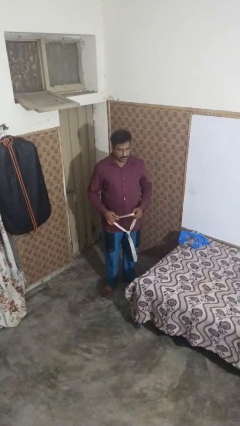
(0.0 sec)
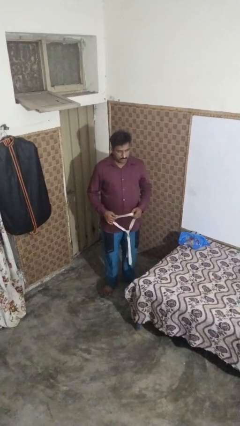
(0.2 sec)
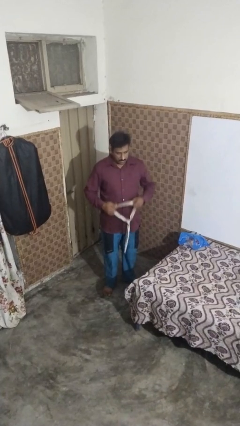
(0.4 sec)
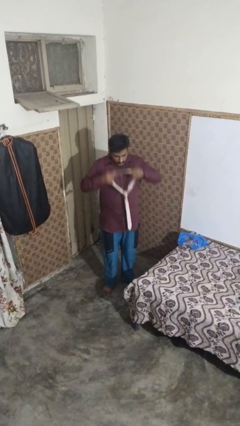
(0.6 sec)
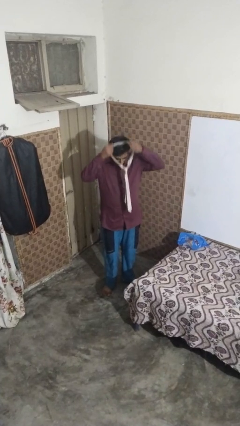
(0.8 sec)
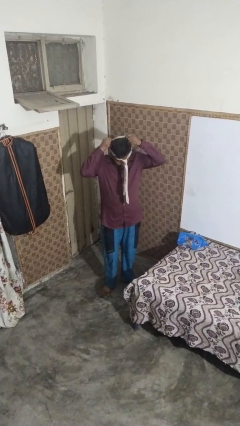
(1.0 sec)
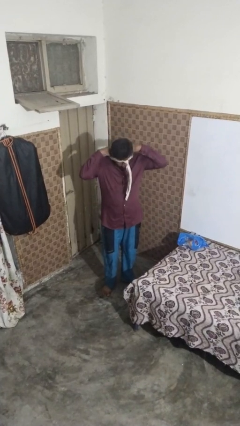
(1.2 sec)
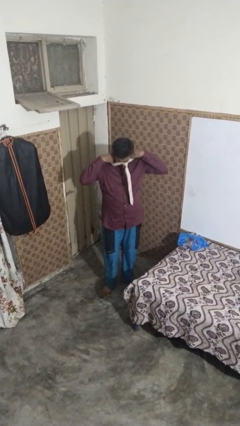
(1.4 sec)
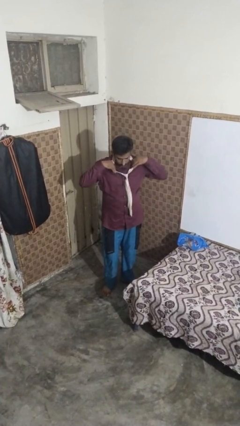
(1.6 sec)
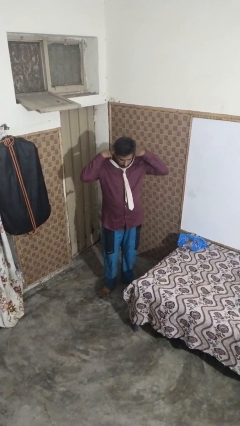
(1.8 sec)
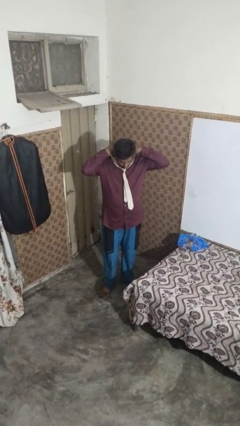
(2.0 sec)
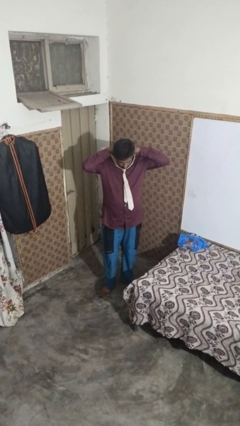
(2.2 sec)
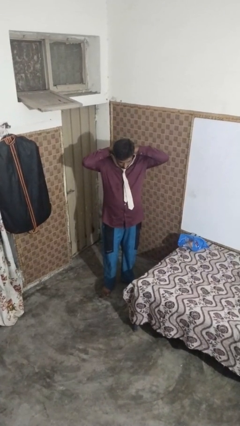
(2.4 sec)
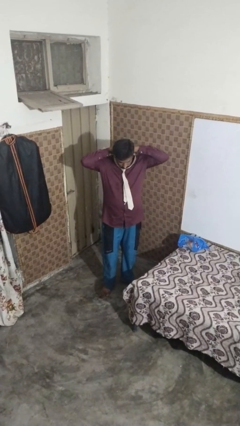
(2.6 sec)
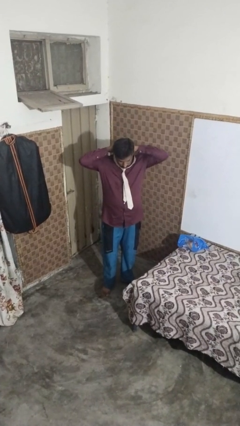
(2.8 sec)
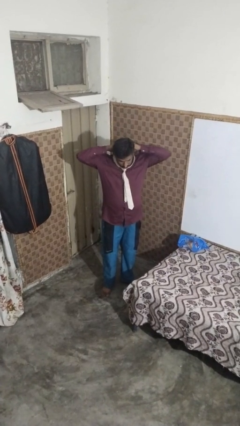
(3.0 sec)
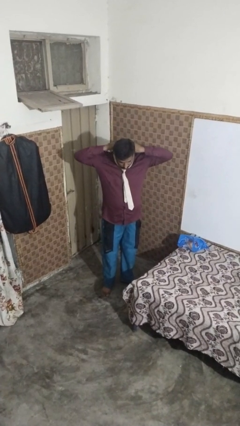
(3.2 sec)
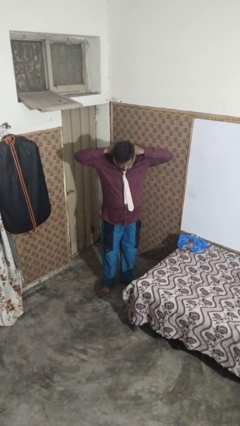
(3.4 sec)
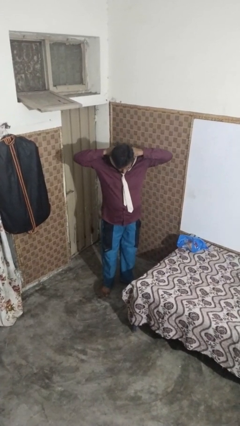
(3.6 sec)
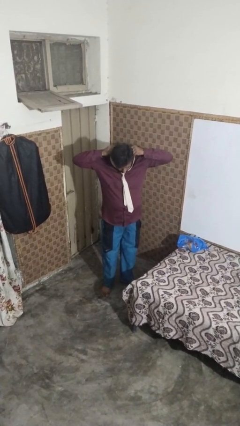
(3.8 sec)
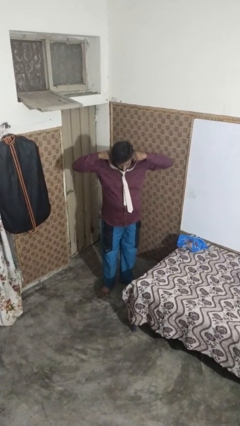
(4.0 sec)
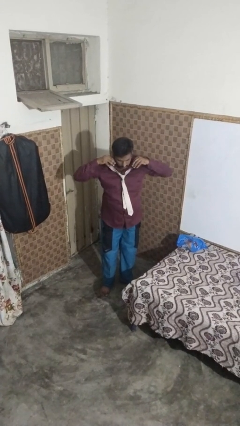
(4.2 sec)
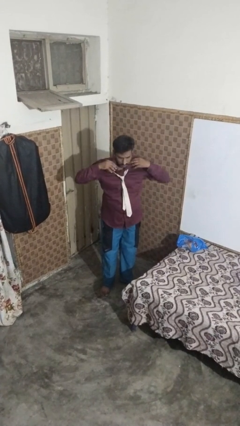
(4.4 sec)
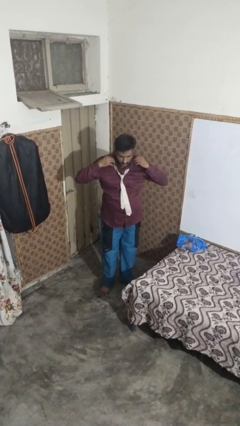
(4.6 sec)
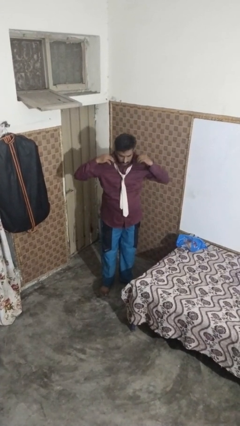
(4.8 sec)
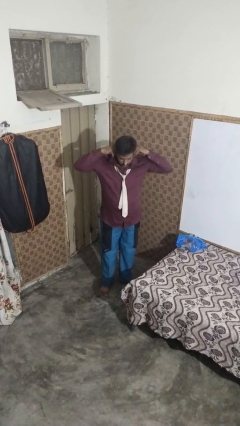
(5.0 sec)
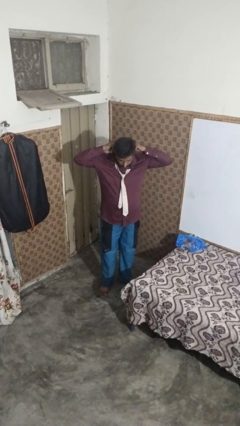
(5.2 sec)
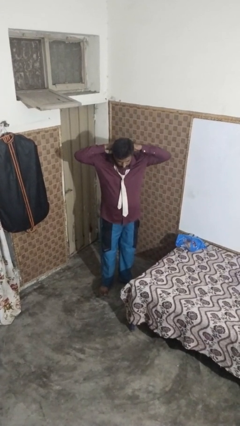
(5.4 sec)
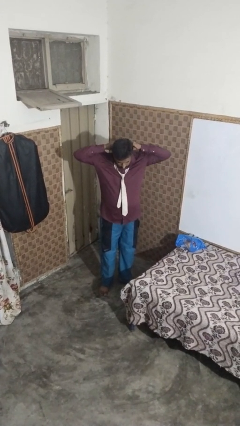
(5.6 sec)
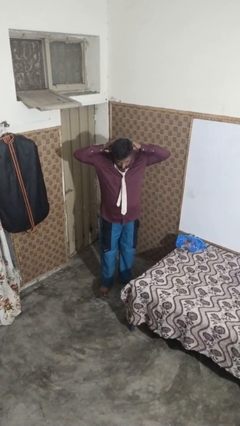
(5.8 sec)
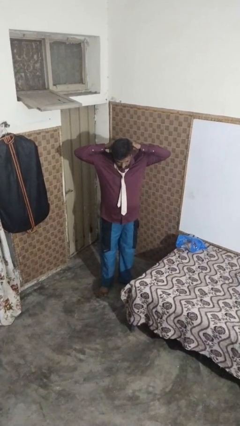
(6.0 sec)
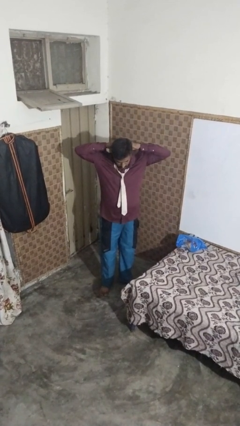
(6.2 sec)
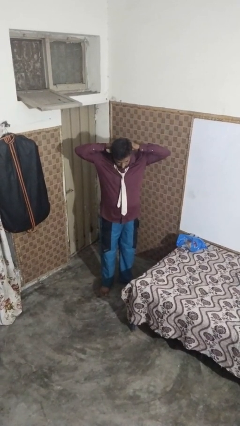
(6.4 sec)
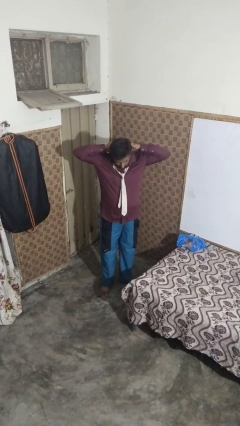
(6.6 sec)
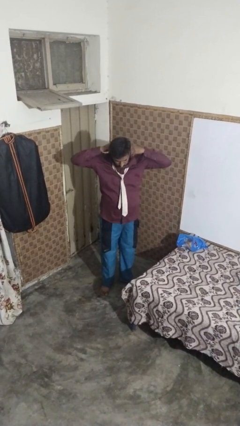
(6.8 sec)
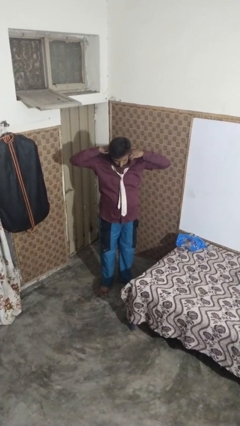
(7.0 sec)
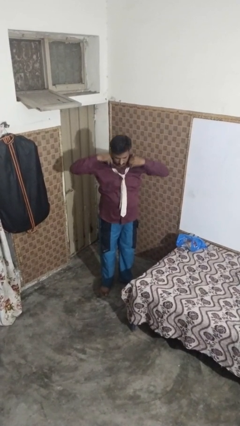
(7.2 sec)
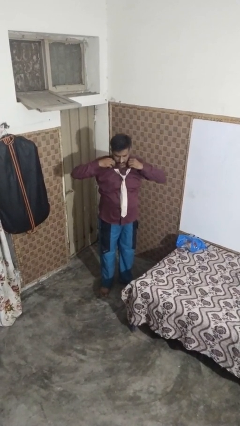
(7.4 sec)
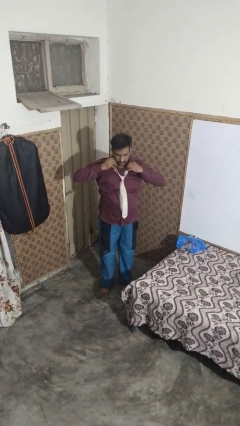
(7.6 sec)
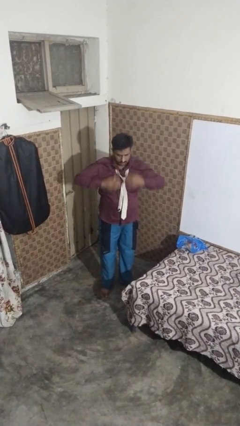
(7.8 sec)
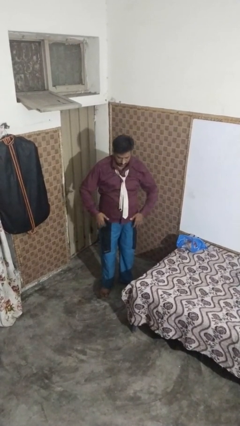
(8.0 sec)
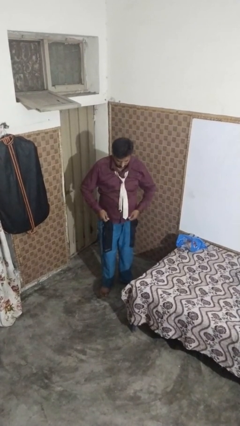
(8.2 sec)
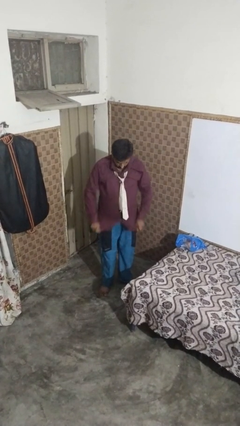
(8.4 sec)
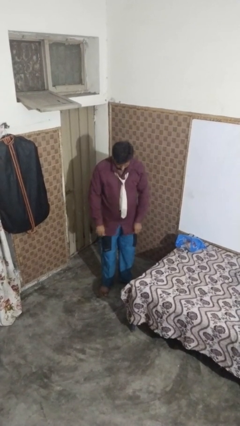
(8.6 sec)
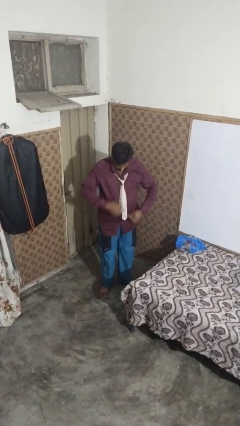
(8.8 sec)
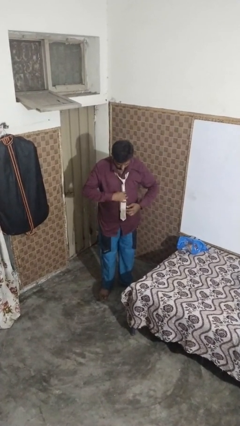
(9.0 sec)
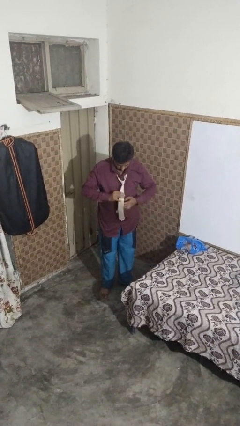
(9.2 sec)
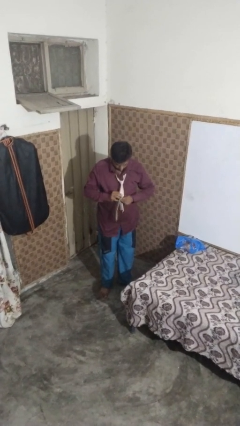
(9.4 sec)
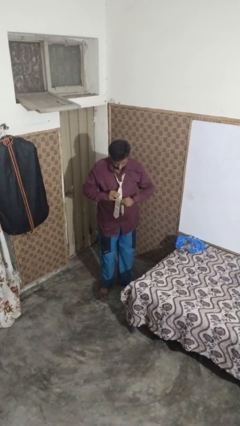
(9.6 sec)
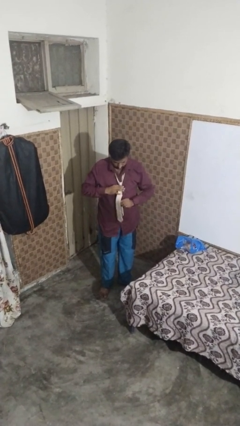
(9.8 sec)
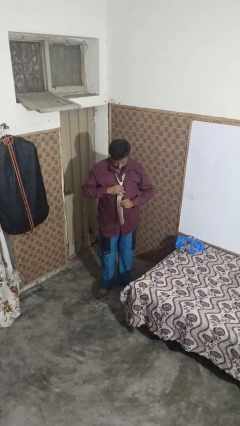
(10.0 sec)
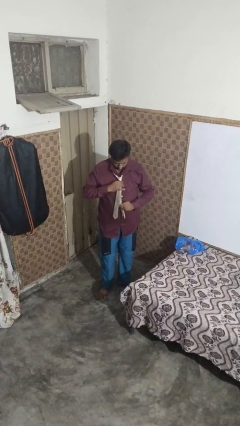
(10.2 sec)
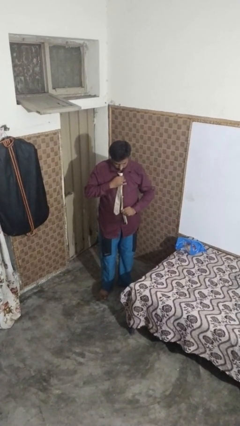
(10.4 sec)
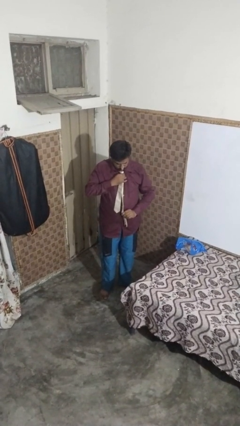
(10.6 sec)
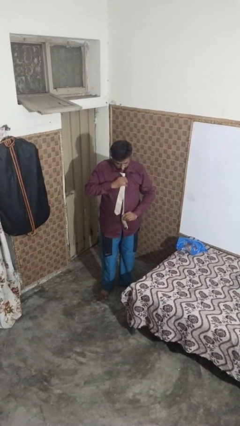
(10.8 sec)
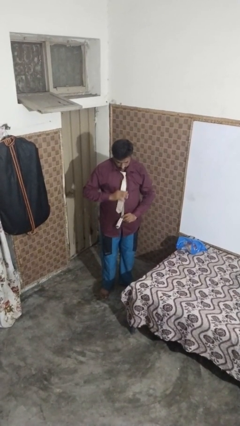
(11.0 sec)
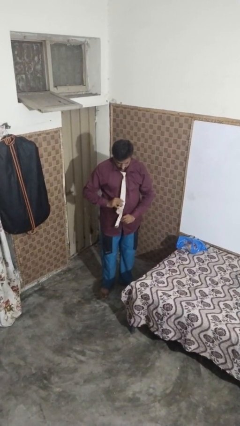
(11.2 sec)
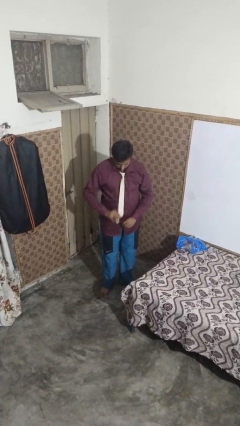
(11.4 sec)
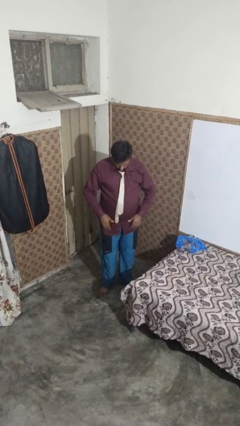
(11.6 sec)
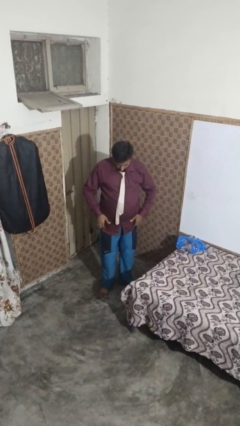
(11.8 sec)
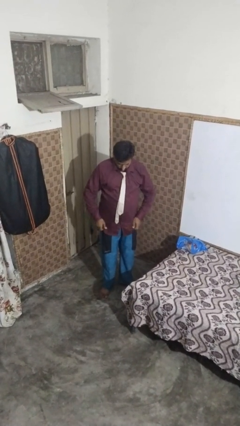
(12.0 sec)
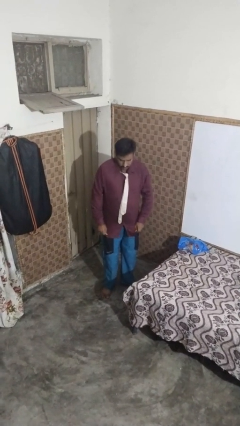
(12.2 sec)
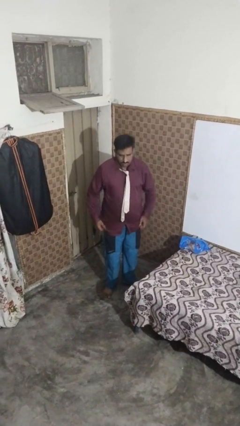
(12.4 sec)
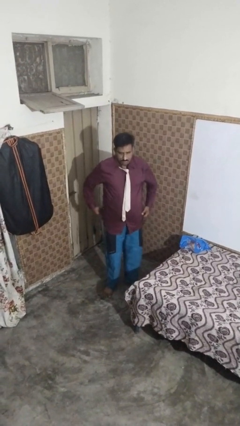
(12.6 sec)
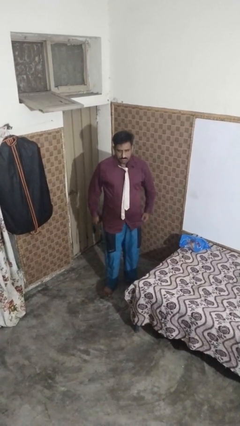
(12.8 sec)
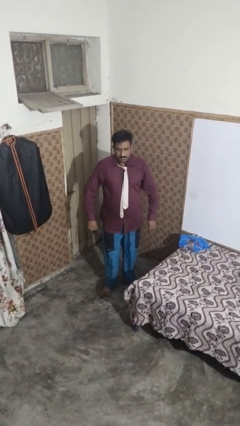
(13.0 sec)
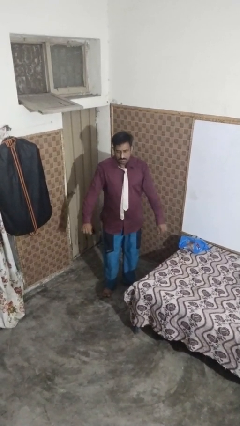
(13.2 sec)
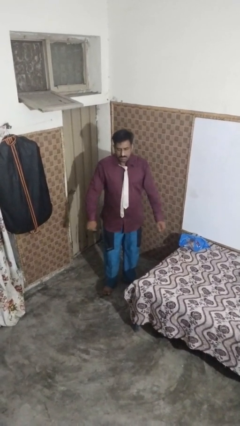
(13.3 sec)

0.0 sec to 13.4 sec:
person puts on necktie

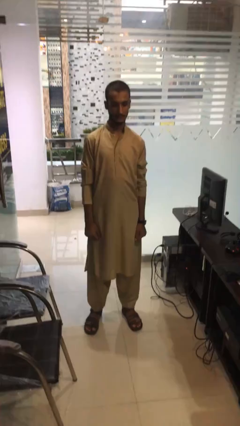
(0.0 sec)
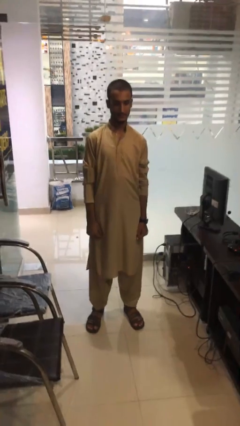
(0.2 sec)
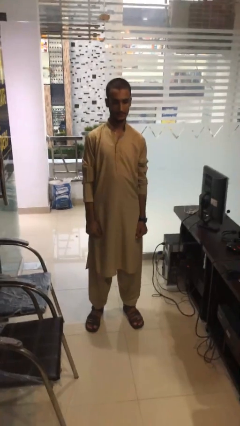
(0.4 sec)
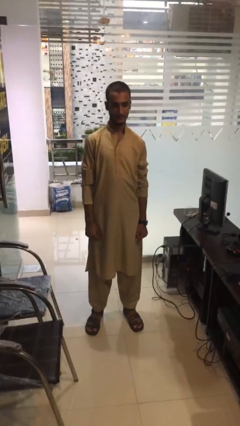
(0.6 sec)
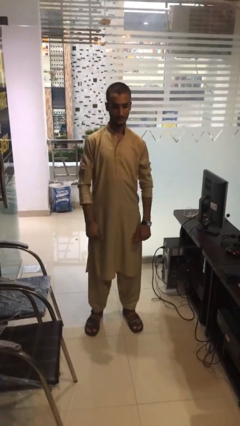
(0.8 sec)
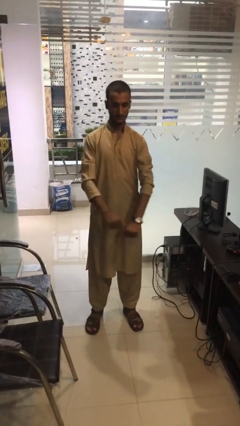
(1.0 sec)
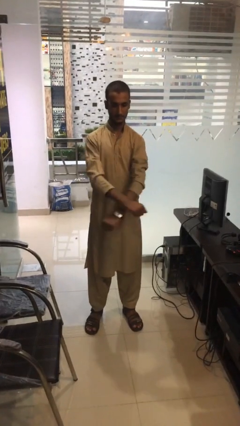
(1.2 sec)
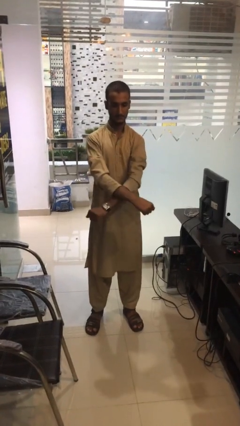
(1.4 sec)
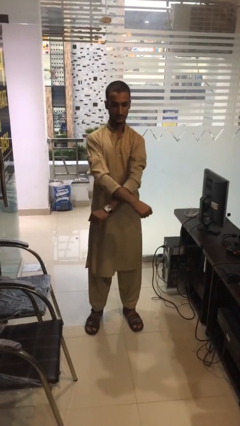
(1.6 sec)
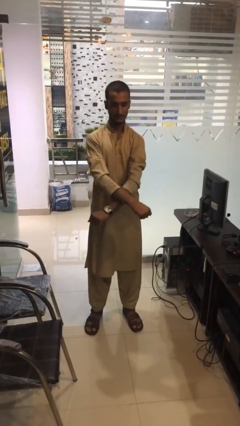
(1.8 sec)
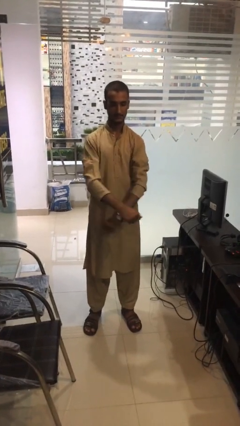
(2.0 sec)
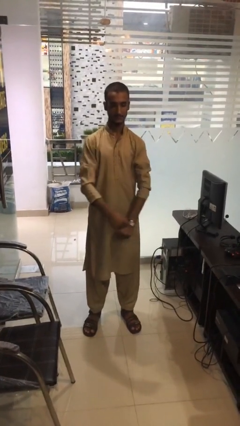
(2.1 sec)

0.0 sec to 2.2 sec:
person gestures arms x

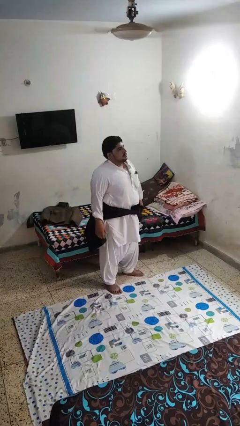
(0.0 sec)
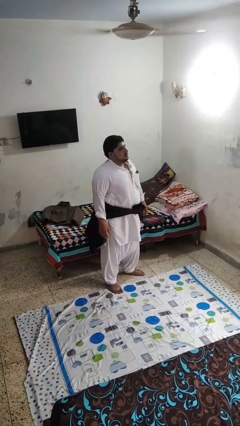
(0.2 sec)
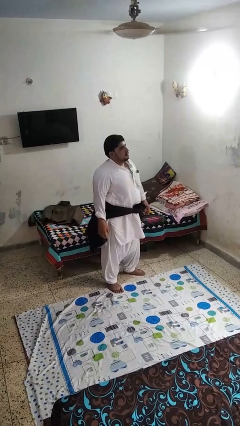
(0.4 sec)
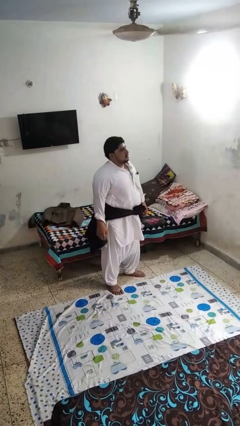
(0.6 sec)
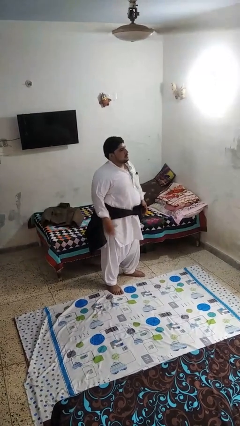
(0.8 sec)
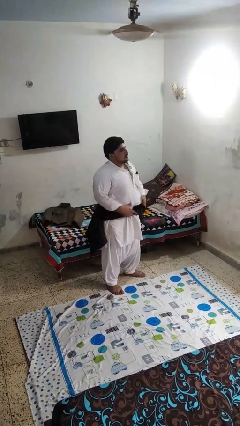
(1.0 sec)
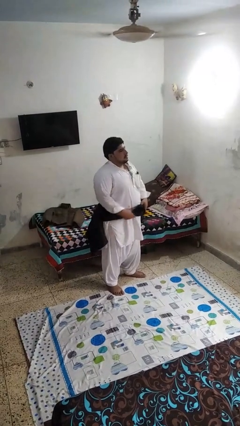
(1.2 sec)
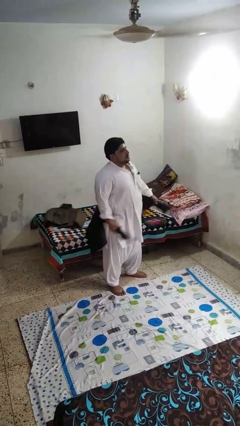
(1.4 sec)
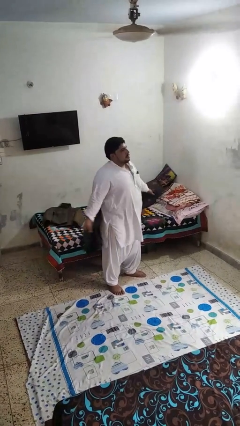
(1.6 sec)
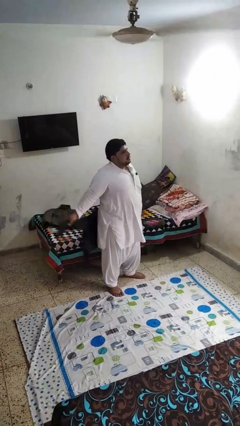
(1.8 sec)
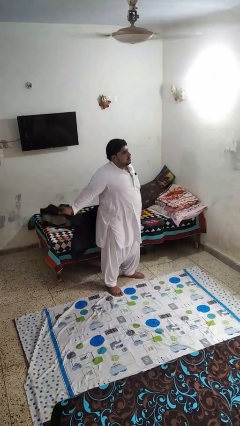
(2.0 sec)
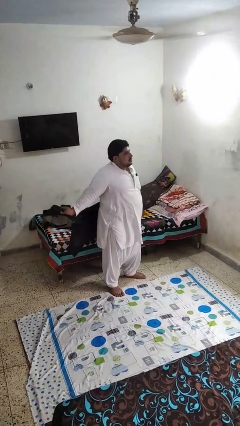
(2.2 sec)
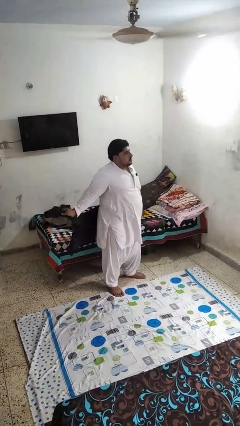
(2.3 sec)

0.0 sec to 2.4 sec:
person unties jacket around waist
